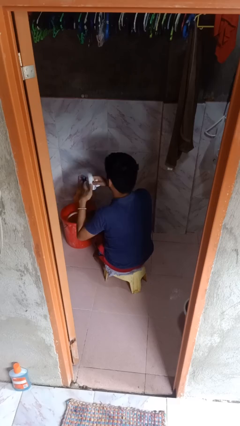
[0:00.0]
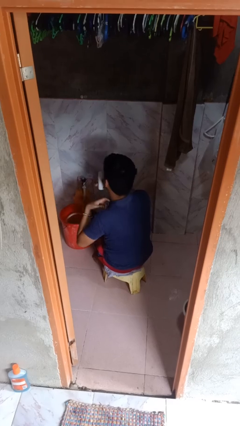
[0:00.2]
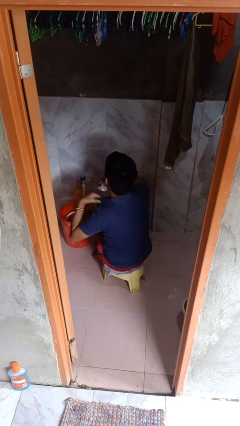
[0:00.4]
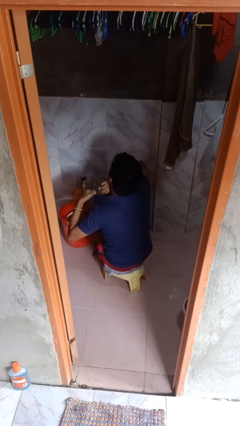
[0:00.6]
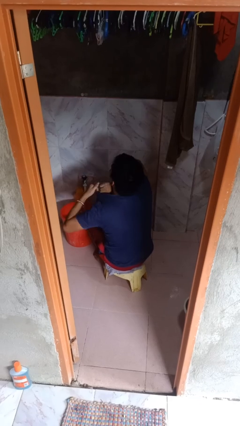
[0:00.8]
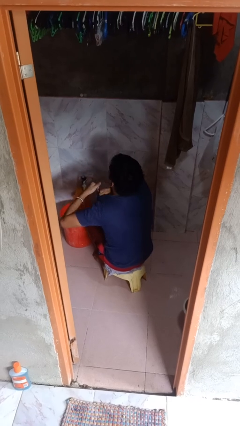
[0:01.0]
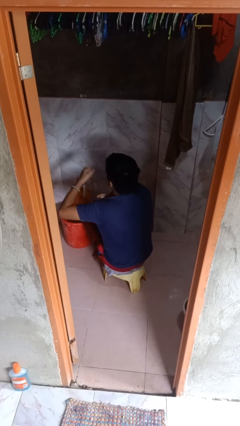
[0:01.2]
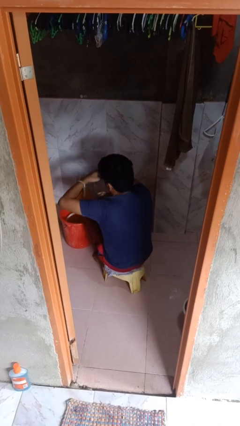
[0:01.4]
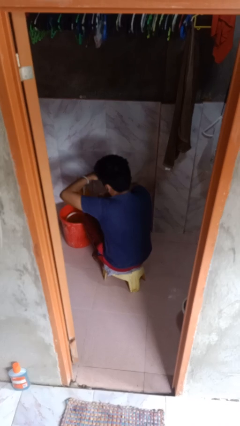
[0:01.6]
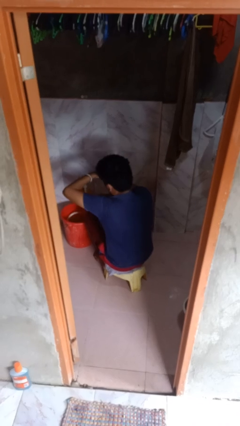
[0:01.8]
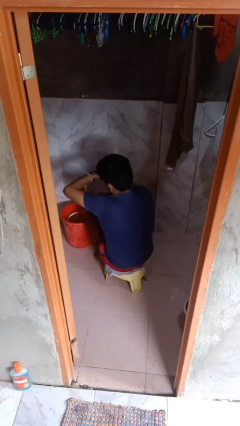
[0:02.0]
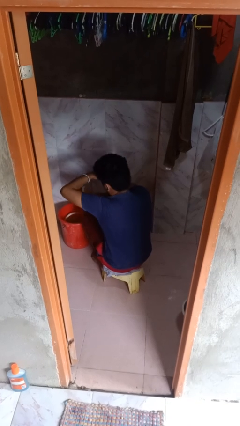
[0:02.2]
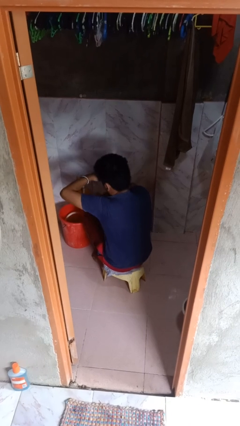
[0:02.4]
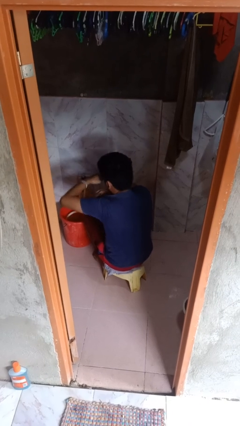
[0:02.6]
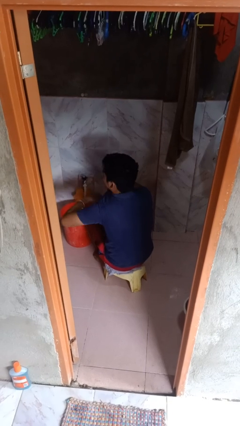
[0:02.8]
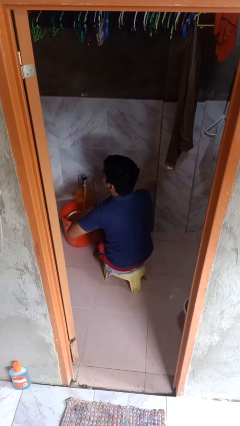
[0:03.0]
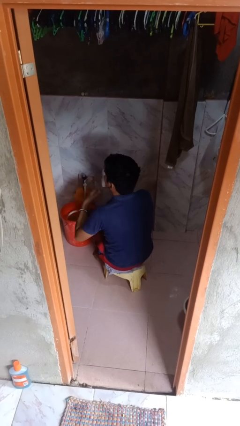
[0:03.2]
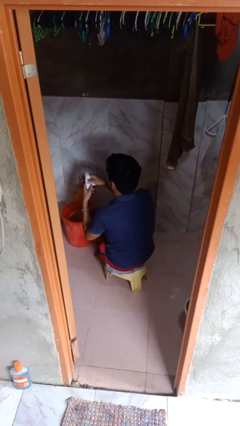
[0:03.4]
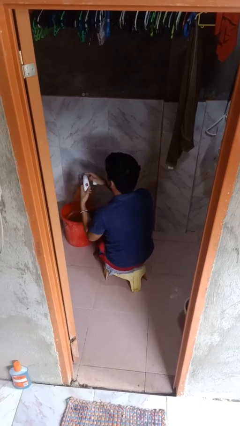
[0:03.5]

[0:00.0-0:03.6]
person applies deodorant

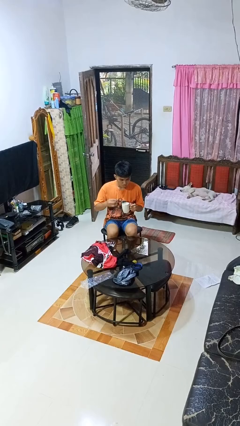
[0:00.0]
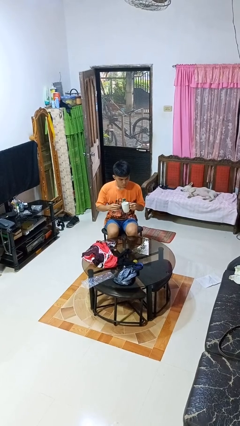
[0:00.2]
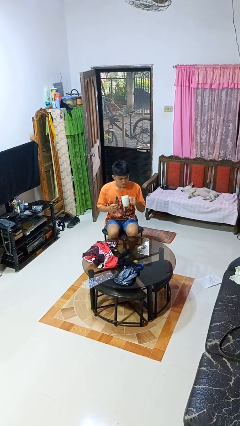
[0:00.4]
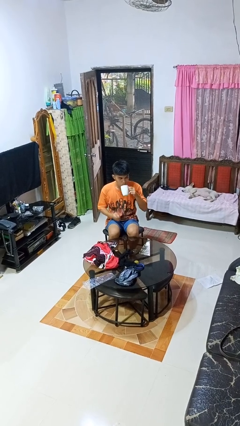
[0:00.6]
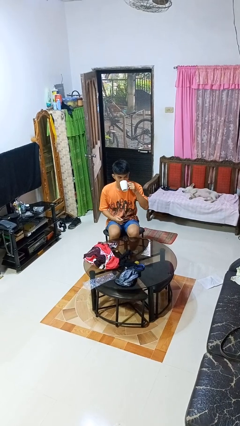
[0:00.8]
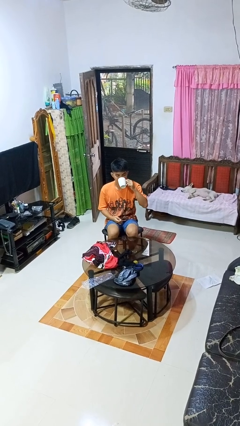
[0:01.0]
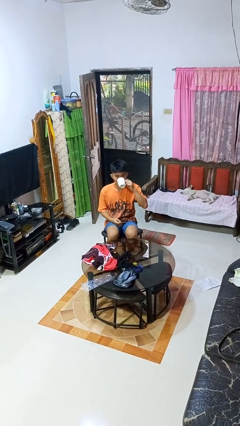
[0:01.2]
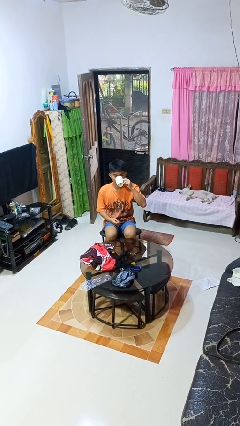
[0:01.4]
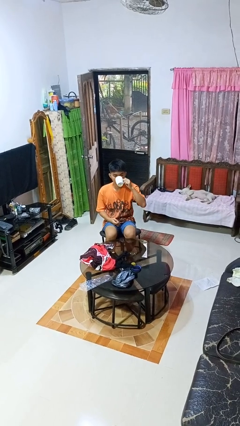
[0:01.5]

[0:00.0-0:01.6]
person drinks from mug

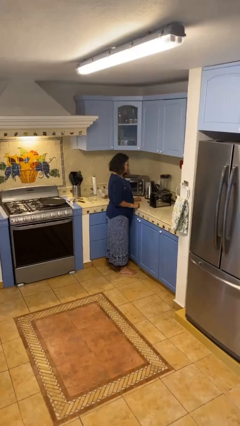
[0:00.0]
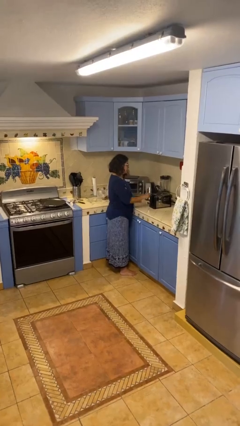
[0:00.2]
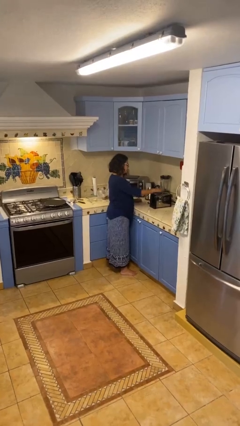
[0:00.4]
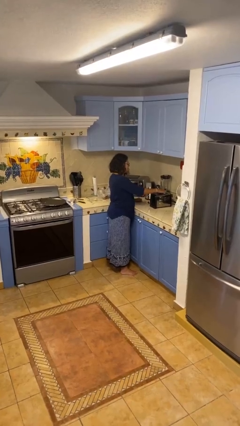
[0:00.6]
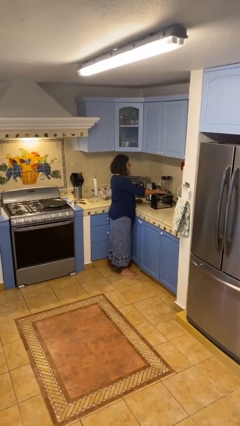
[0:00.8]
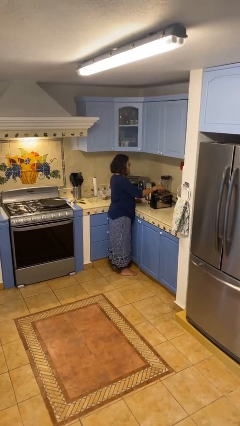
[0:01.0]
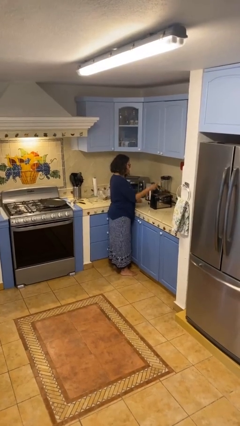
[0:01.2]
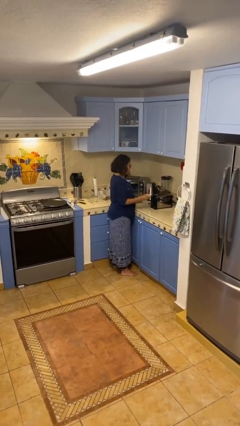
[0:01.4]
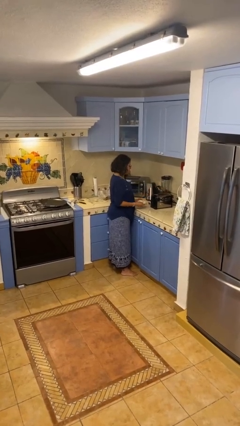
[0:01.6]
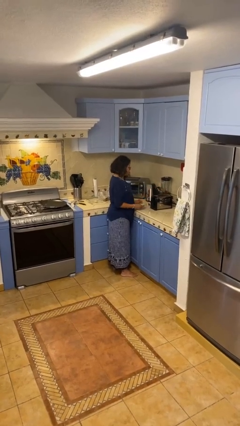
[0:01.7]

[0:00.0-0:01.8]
person takes object from toaster

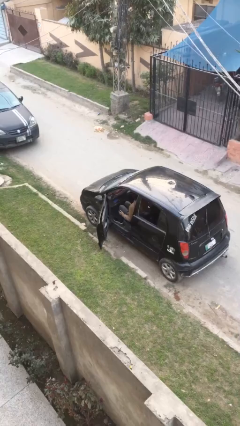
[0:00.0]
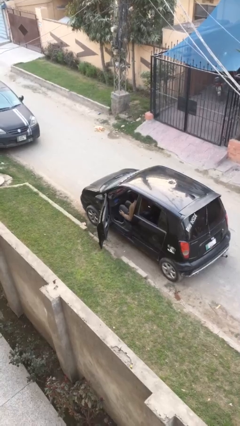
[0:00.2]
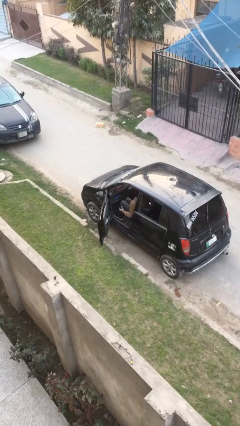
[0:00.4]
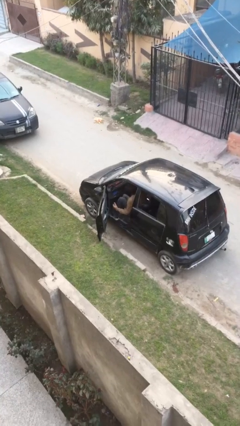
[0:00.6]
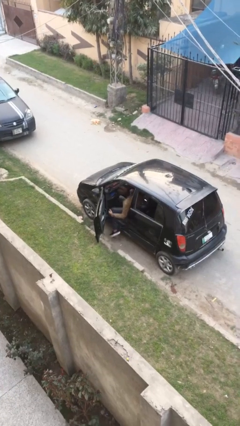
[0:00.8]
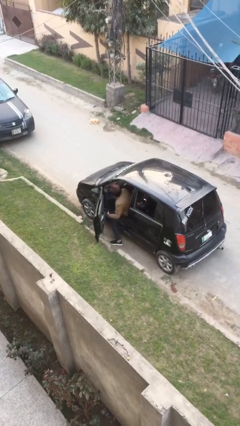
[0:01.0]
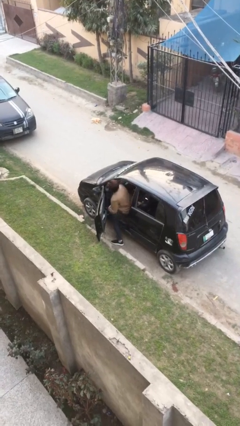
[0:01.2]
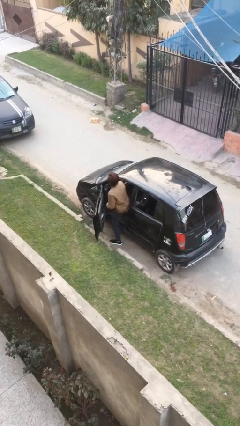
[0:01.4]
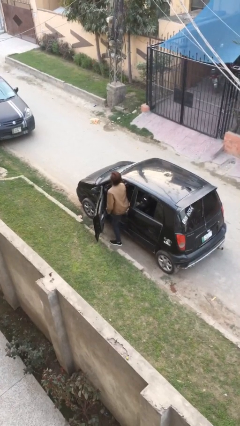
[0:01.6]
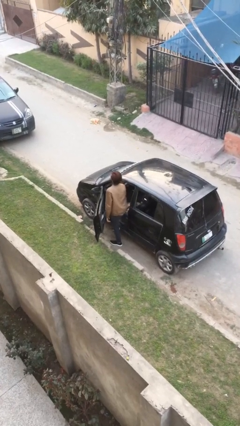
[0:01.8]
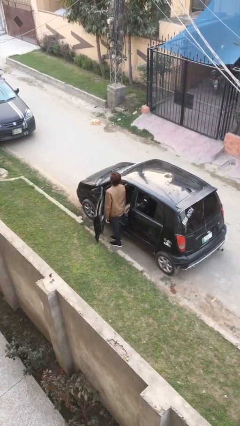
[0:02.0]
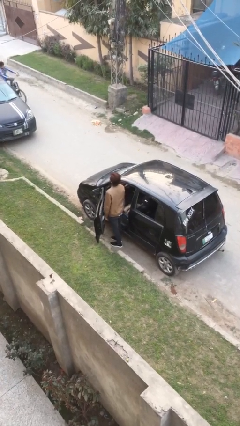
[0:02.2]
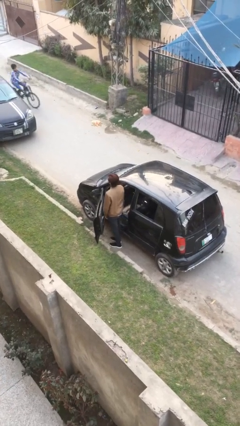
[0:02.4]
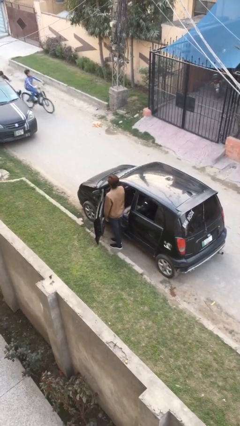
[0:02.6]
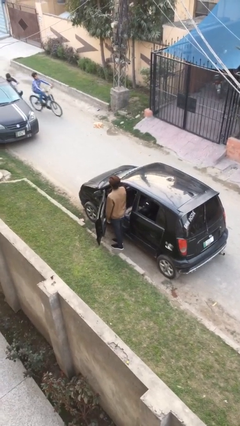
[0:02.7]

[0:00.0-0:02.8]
person exits car

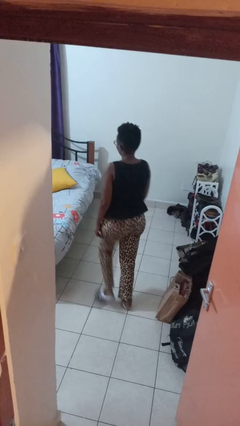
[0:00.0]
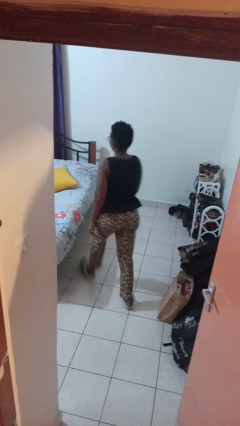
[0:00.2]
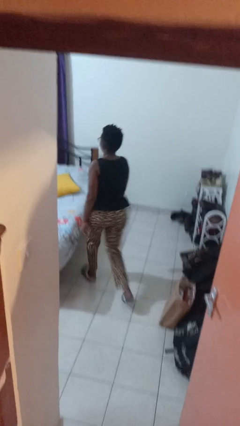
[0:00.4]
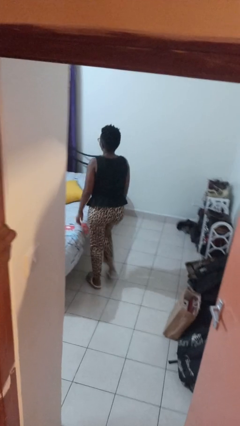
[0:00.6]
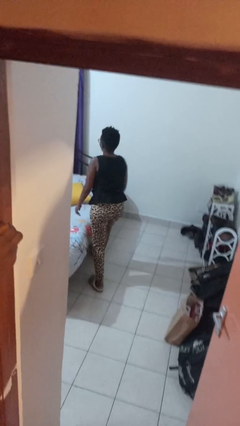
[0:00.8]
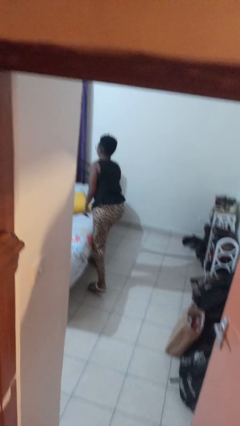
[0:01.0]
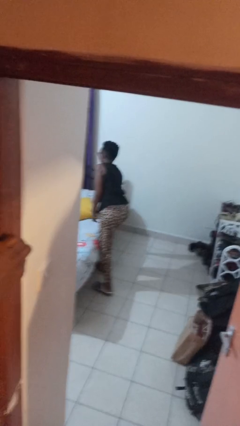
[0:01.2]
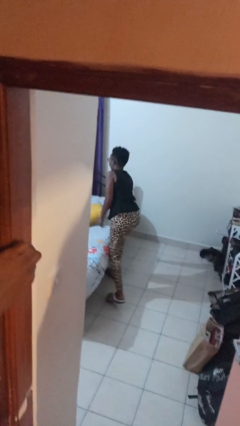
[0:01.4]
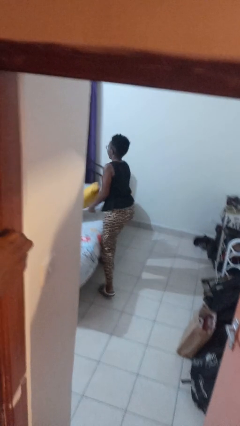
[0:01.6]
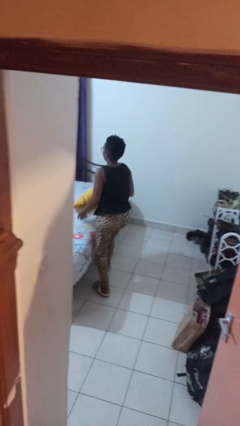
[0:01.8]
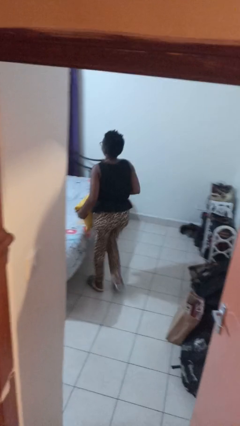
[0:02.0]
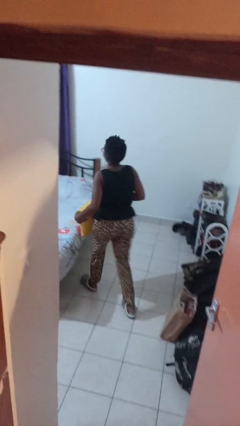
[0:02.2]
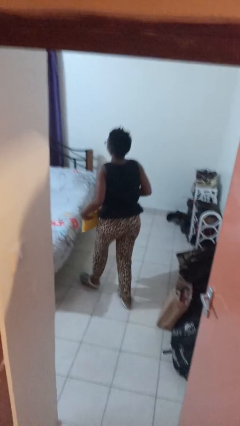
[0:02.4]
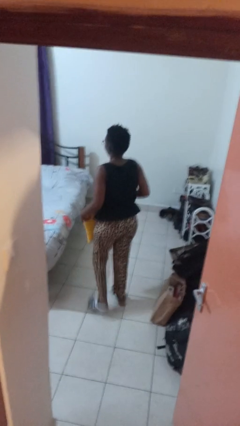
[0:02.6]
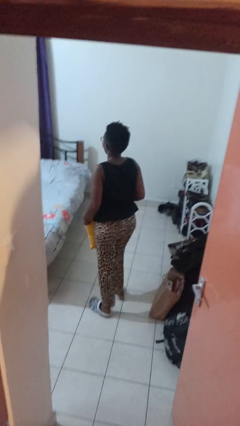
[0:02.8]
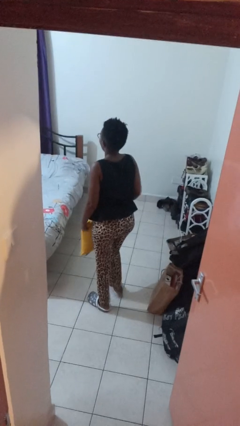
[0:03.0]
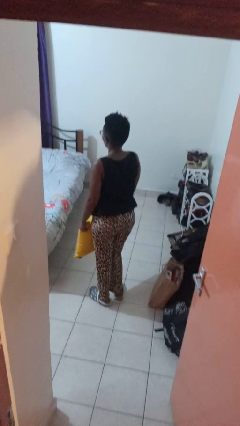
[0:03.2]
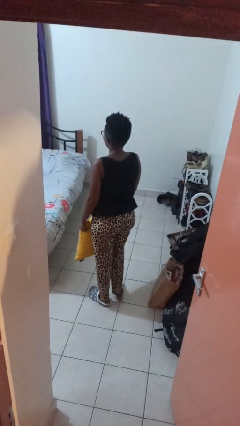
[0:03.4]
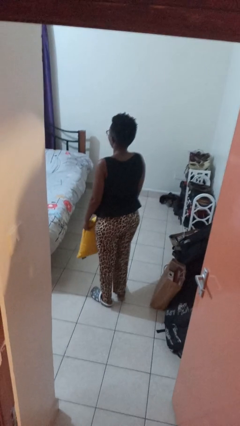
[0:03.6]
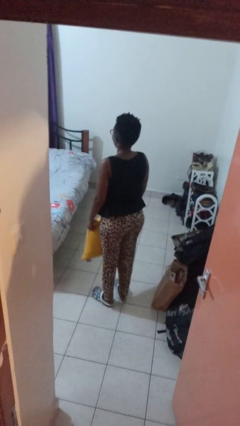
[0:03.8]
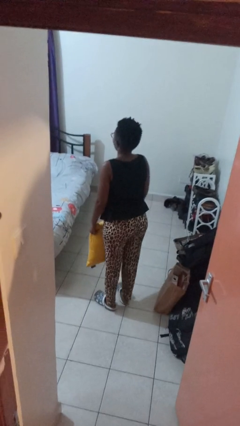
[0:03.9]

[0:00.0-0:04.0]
person picks up object from bed

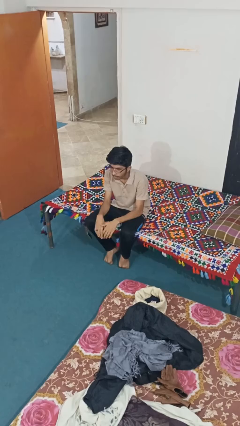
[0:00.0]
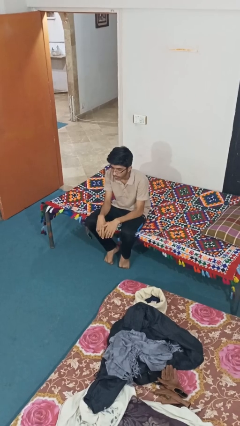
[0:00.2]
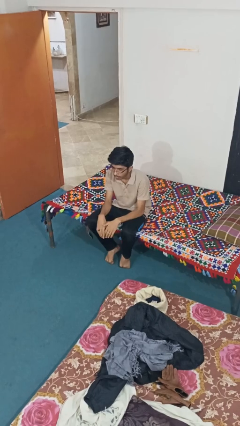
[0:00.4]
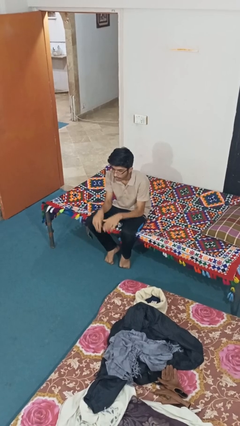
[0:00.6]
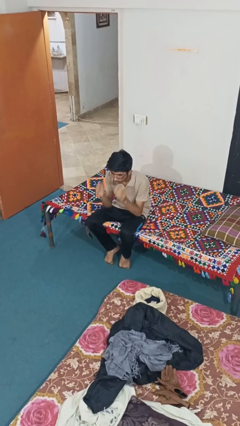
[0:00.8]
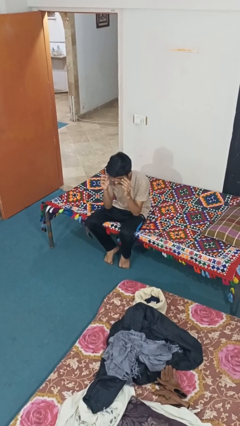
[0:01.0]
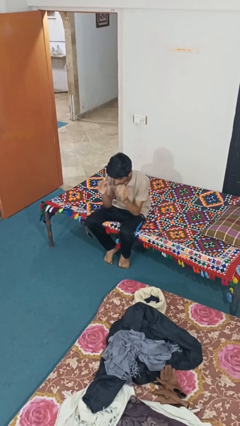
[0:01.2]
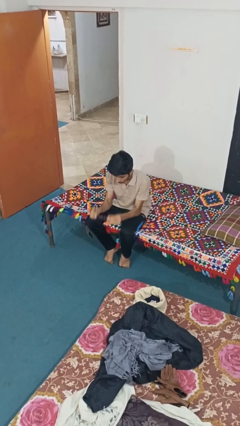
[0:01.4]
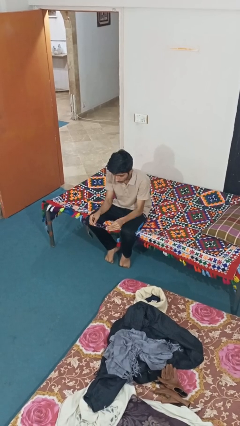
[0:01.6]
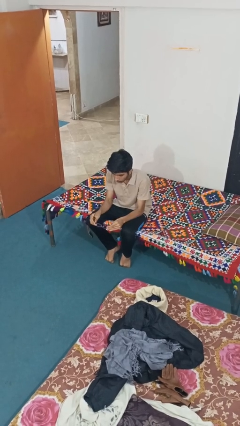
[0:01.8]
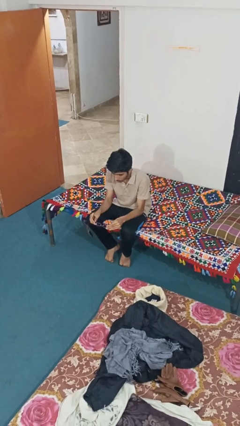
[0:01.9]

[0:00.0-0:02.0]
person takes off glasses

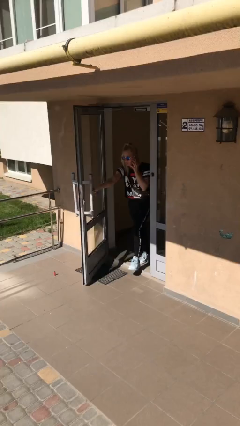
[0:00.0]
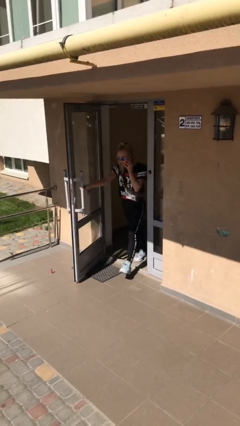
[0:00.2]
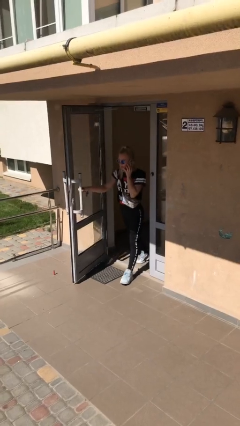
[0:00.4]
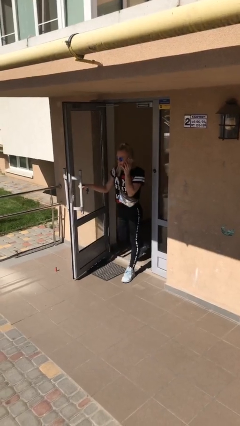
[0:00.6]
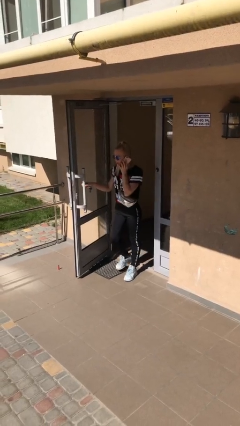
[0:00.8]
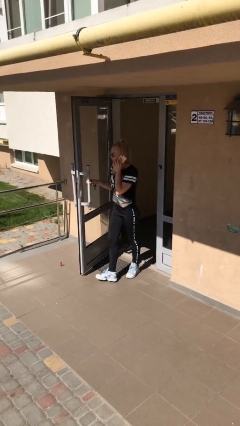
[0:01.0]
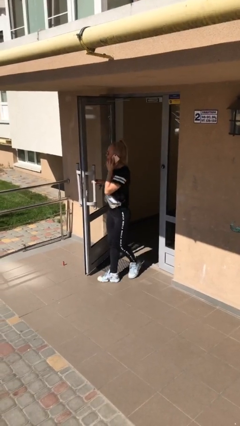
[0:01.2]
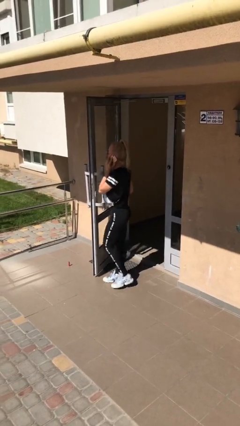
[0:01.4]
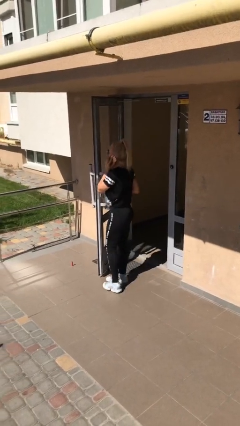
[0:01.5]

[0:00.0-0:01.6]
person enters scene through structure
